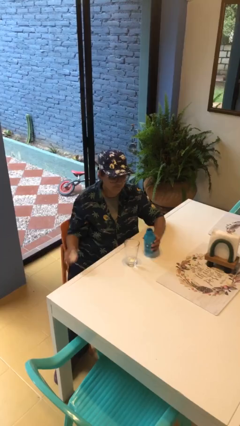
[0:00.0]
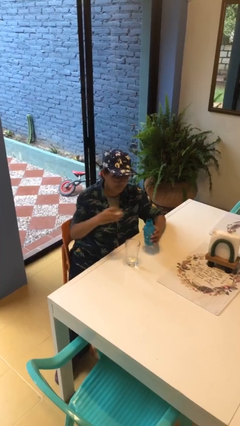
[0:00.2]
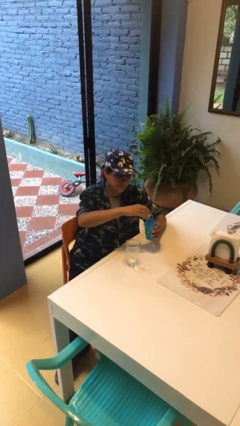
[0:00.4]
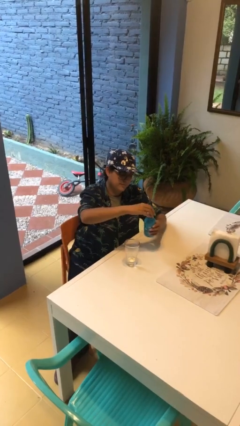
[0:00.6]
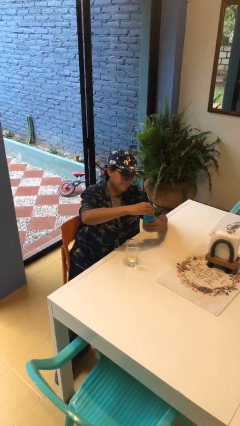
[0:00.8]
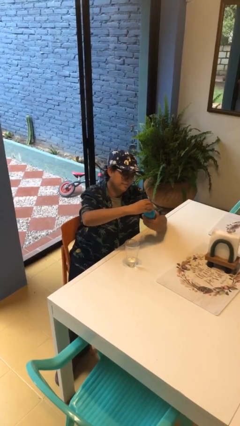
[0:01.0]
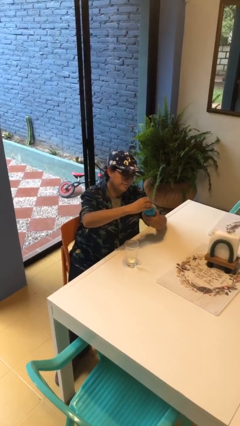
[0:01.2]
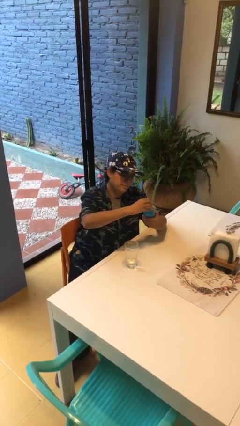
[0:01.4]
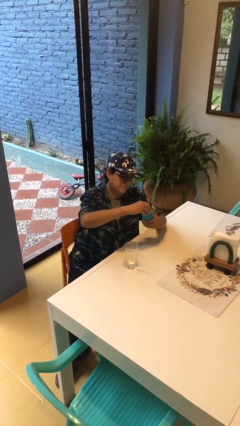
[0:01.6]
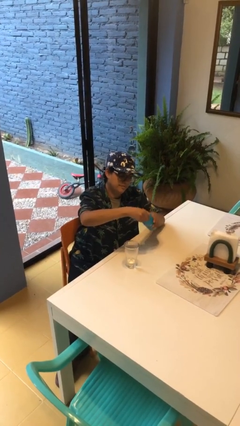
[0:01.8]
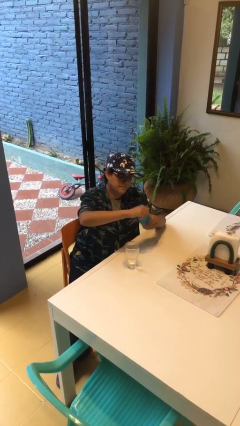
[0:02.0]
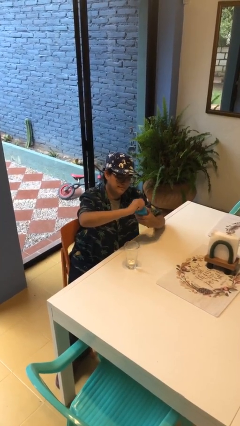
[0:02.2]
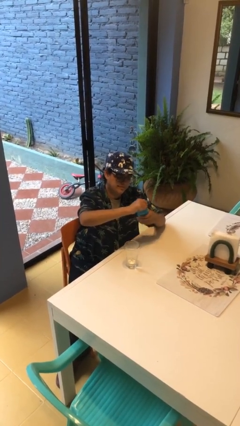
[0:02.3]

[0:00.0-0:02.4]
person screws lid to bottle

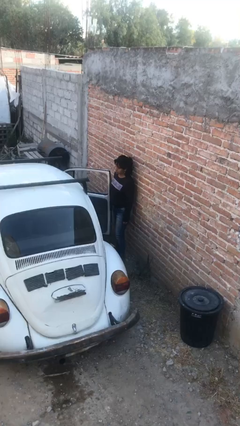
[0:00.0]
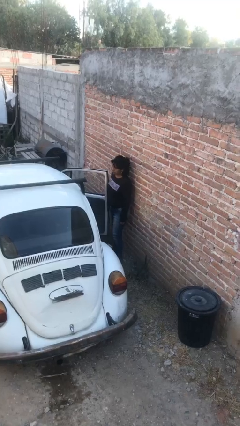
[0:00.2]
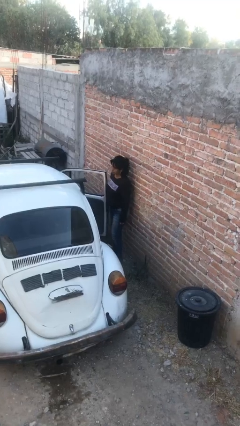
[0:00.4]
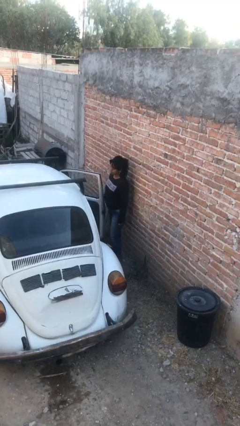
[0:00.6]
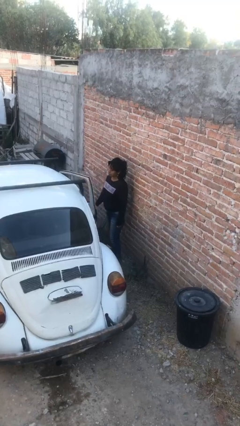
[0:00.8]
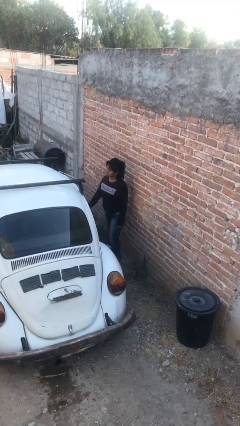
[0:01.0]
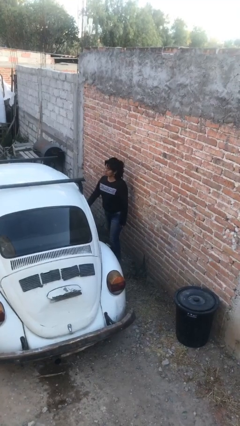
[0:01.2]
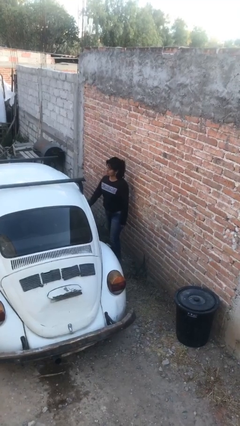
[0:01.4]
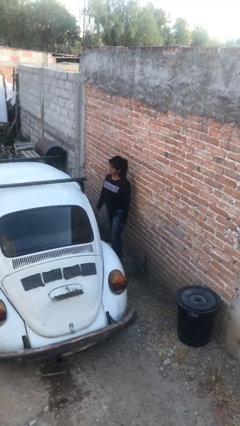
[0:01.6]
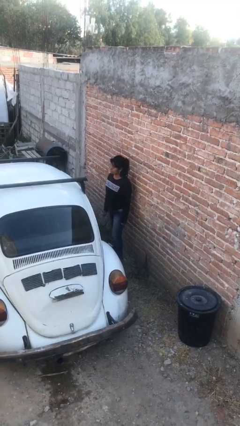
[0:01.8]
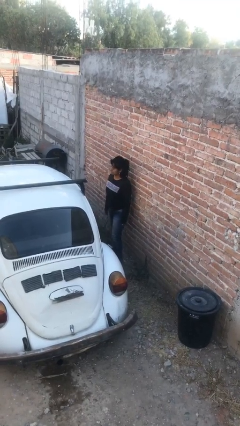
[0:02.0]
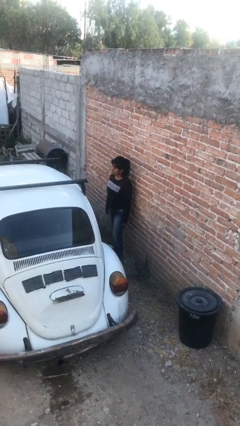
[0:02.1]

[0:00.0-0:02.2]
person closes car door

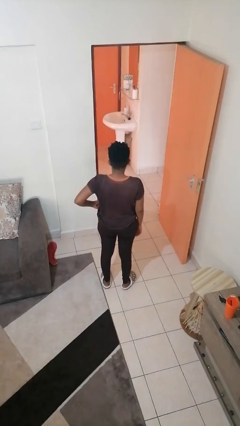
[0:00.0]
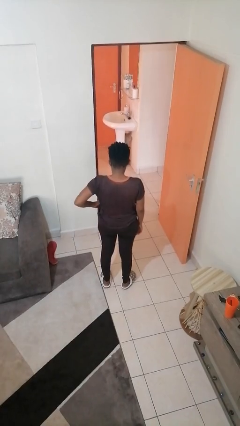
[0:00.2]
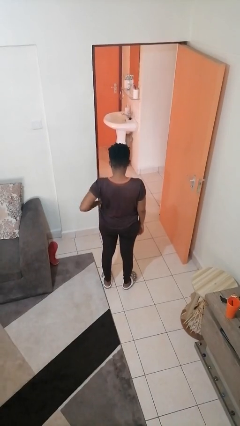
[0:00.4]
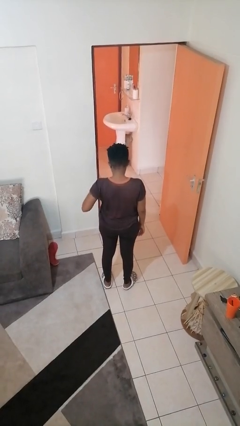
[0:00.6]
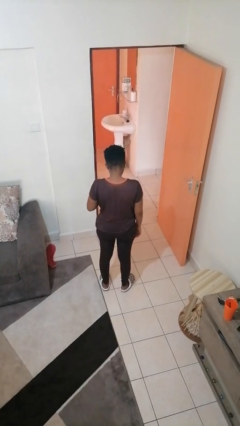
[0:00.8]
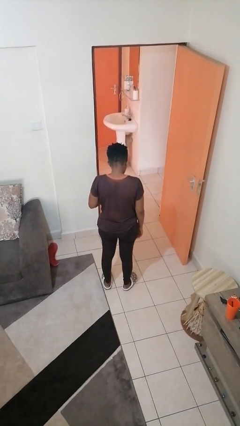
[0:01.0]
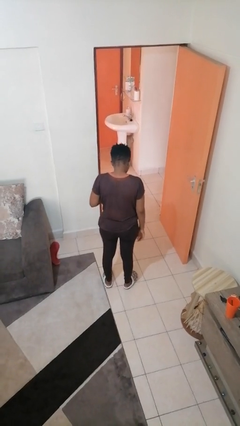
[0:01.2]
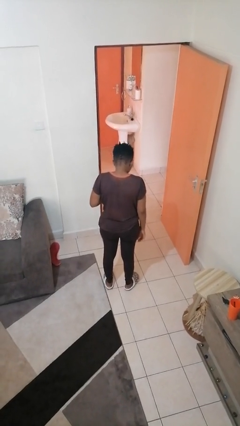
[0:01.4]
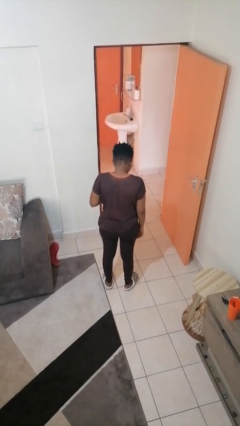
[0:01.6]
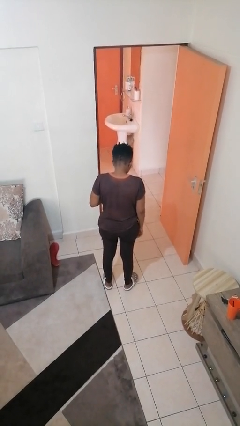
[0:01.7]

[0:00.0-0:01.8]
person takes phone from pocket

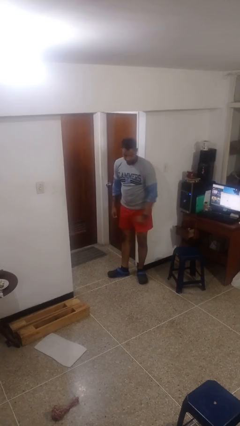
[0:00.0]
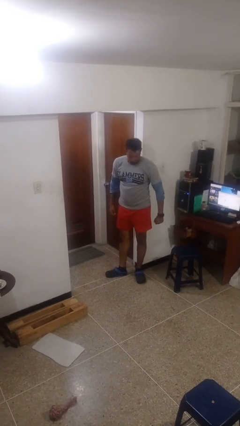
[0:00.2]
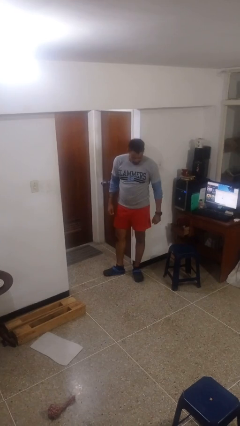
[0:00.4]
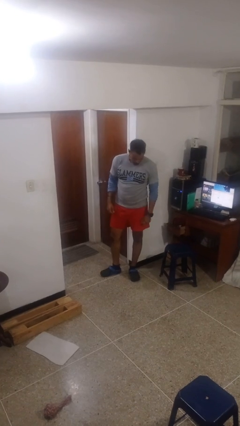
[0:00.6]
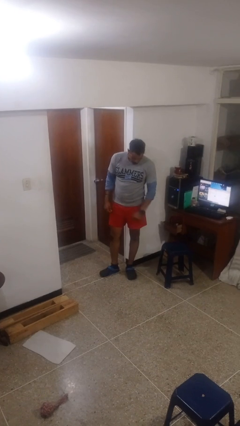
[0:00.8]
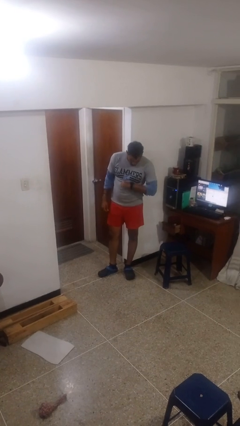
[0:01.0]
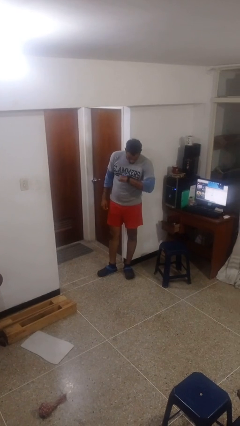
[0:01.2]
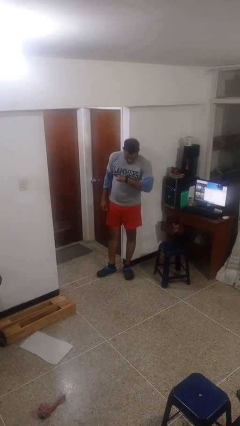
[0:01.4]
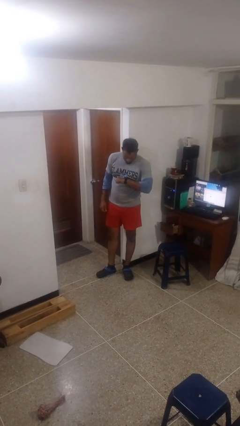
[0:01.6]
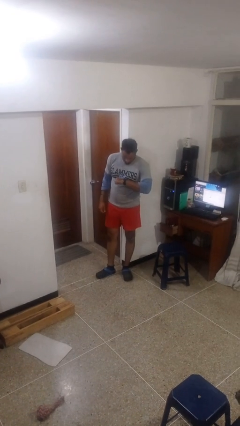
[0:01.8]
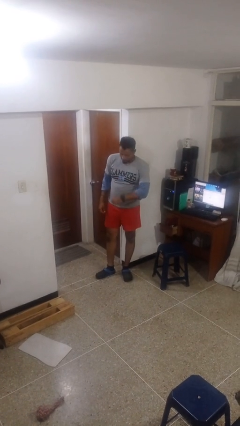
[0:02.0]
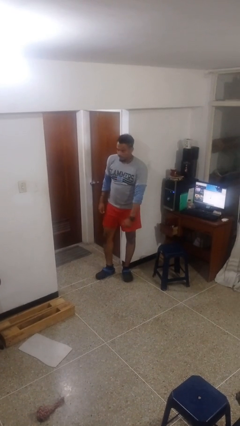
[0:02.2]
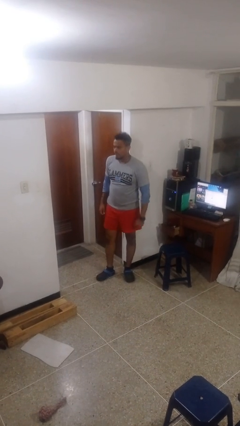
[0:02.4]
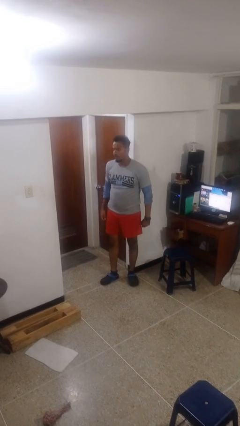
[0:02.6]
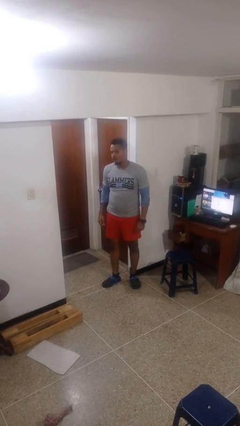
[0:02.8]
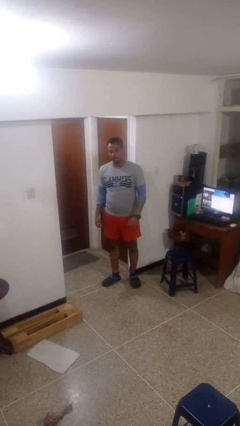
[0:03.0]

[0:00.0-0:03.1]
person looks at wristwatch

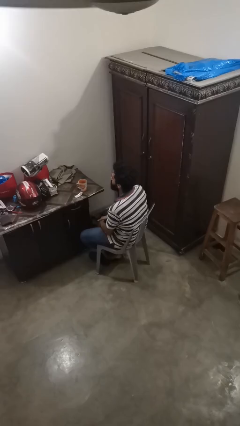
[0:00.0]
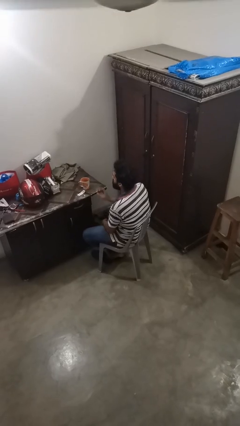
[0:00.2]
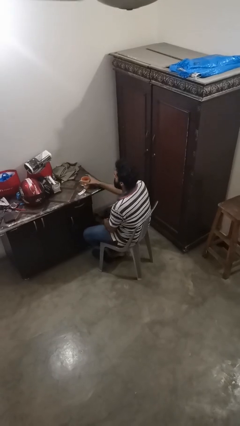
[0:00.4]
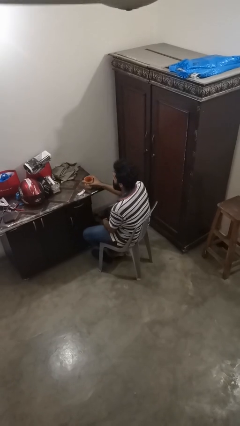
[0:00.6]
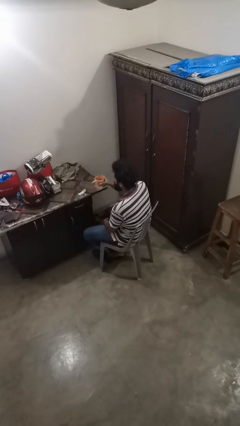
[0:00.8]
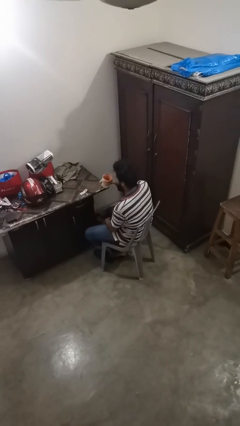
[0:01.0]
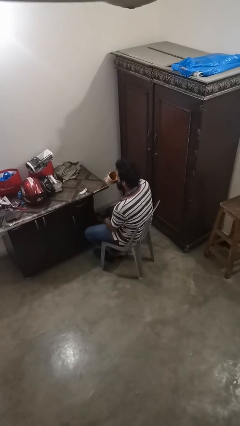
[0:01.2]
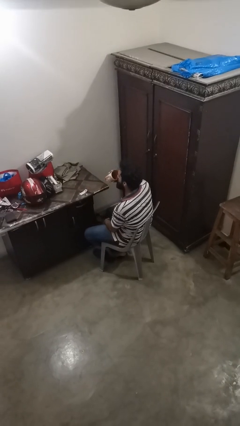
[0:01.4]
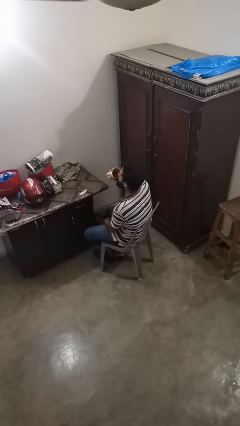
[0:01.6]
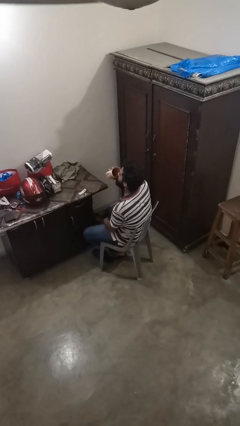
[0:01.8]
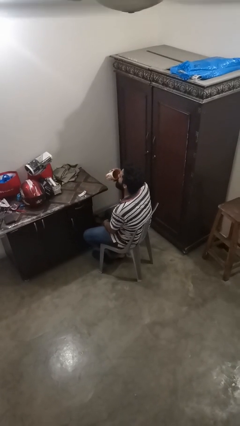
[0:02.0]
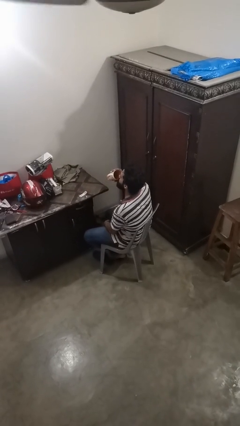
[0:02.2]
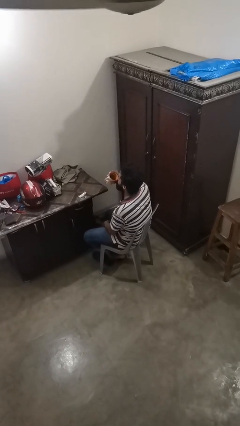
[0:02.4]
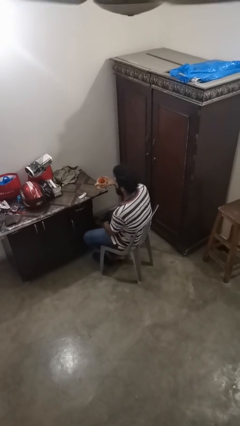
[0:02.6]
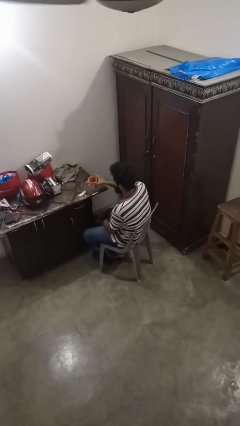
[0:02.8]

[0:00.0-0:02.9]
person drinks from cup

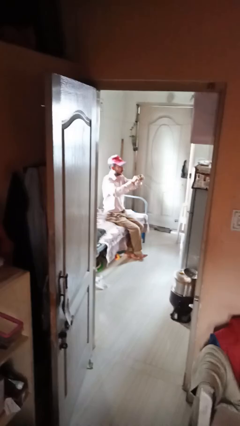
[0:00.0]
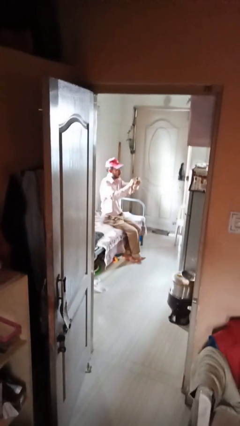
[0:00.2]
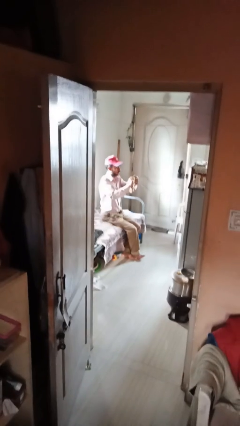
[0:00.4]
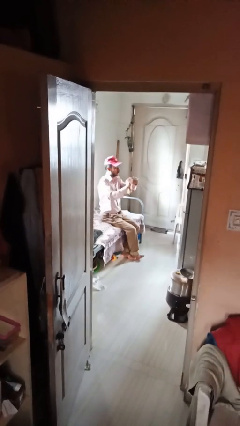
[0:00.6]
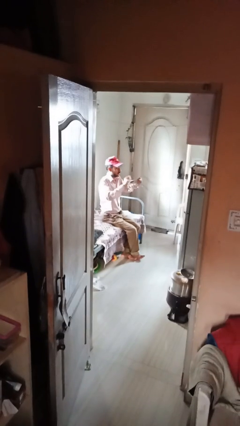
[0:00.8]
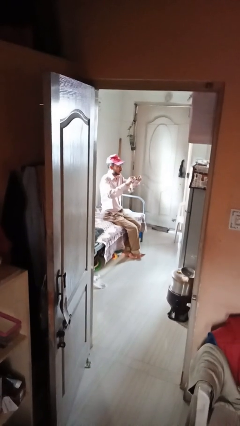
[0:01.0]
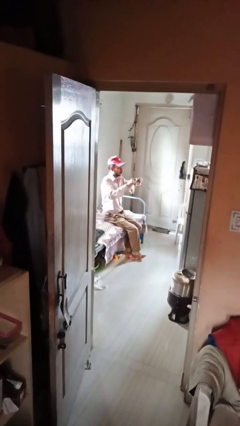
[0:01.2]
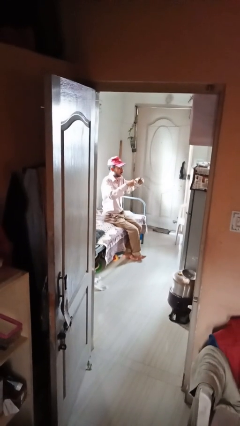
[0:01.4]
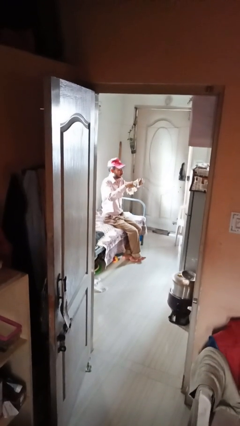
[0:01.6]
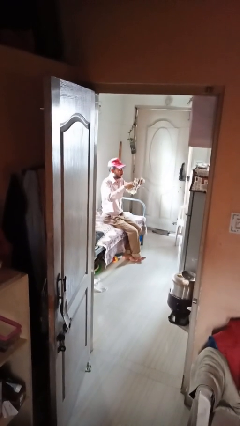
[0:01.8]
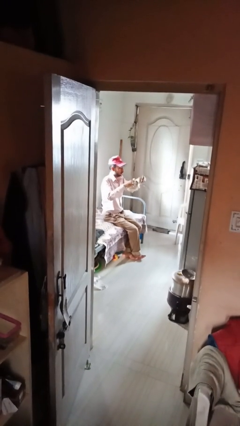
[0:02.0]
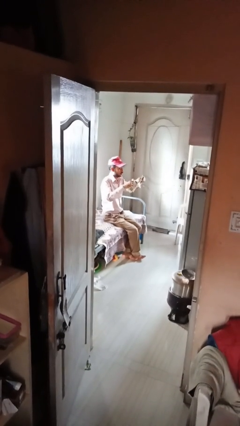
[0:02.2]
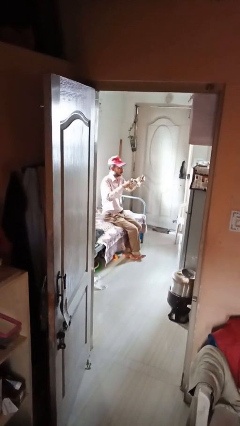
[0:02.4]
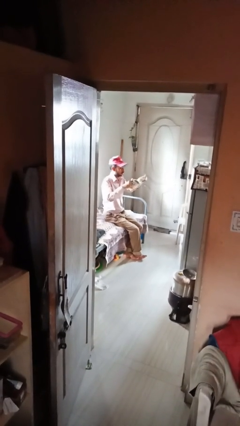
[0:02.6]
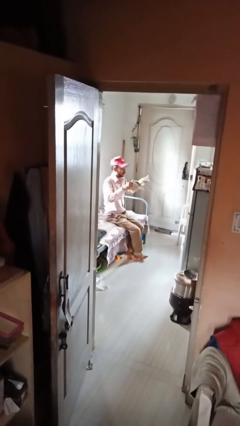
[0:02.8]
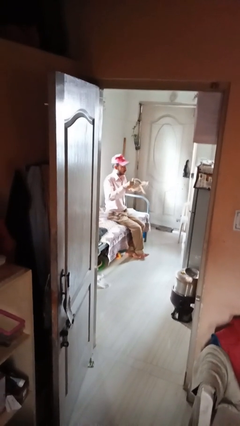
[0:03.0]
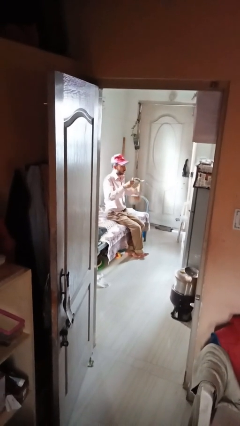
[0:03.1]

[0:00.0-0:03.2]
person tears paper

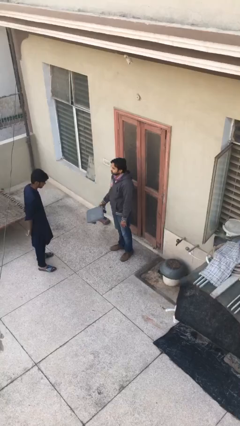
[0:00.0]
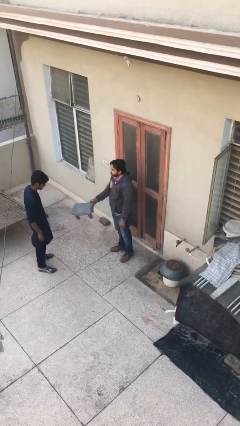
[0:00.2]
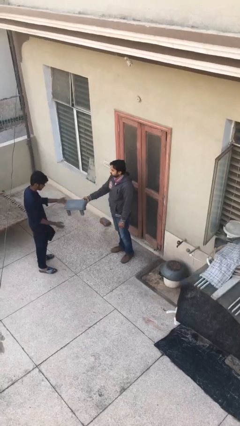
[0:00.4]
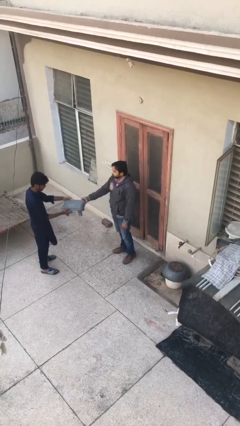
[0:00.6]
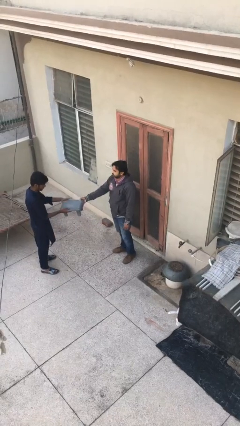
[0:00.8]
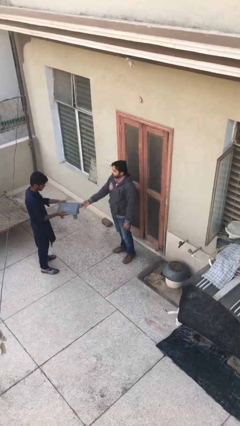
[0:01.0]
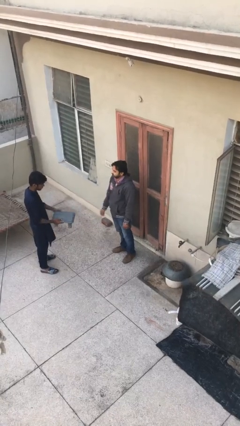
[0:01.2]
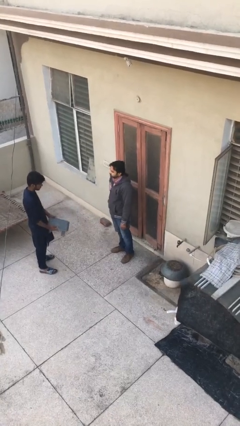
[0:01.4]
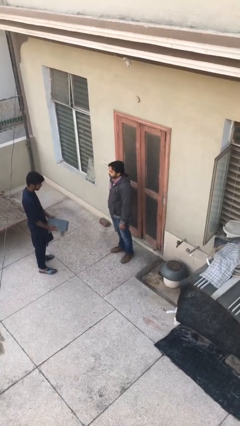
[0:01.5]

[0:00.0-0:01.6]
person transfers object to person
